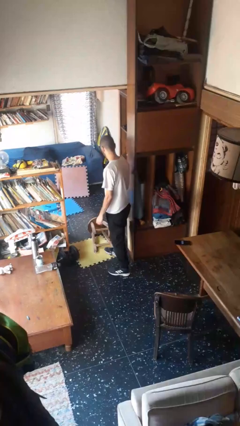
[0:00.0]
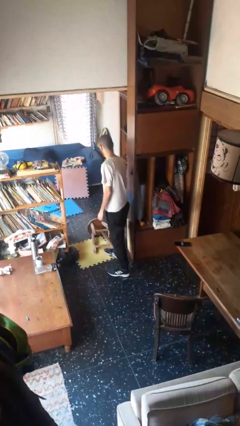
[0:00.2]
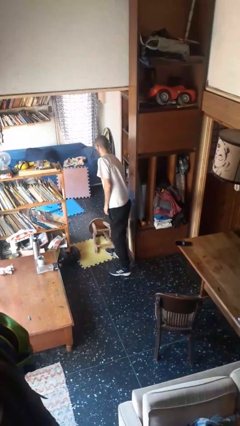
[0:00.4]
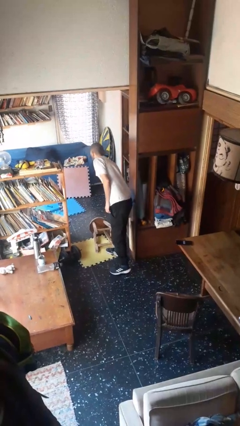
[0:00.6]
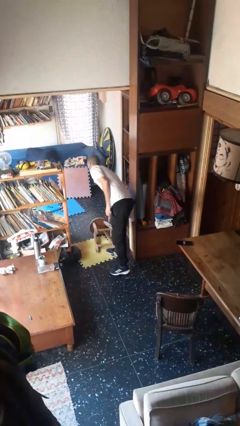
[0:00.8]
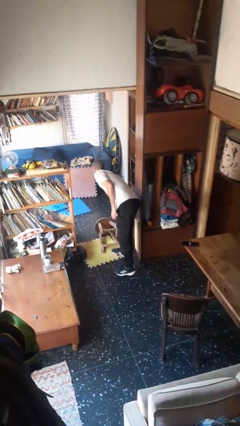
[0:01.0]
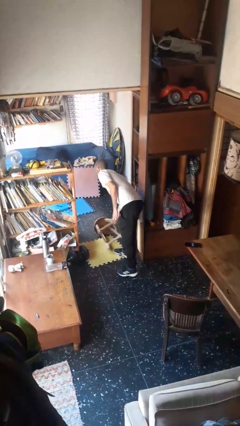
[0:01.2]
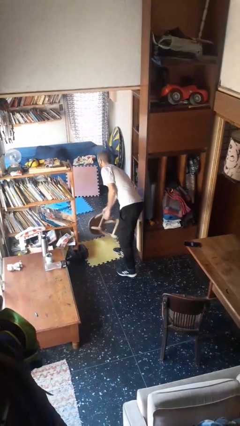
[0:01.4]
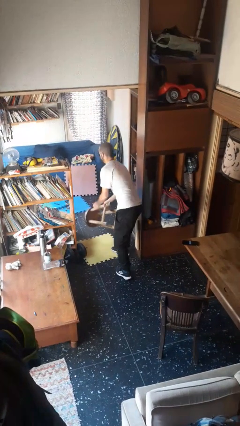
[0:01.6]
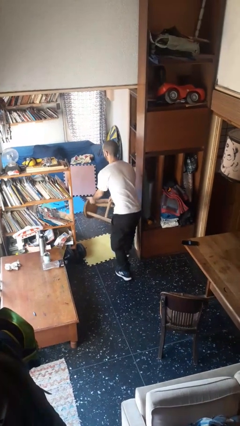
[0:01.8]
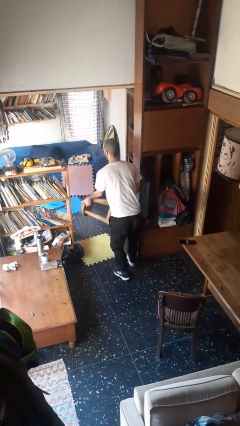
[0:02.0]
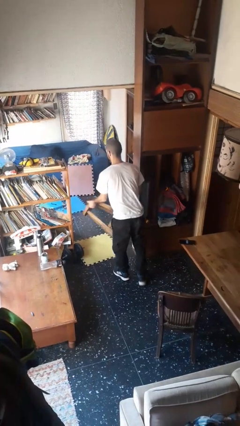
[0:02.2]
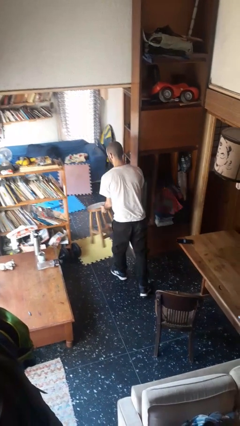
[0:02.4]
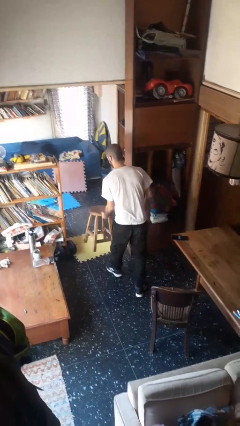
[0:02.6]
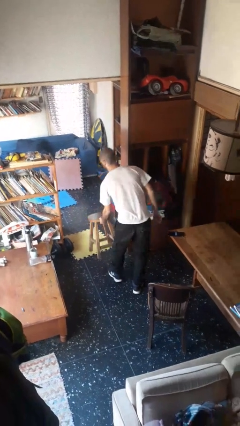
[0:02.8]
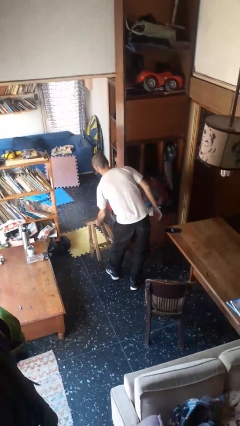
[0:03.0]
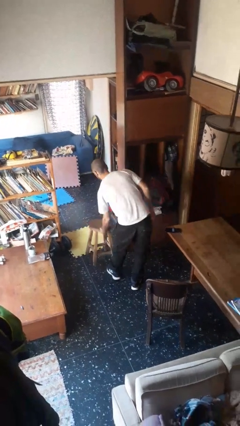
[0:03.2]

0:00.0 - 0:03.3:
person sets upright furniture

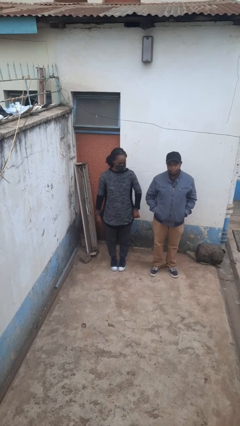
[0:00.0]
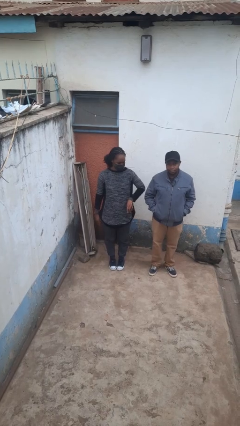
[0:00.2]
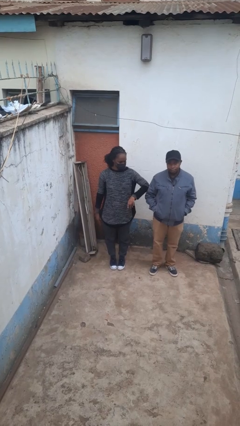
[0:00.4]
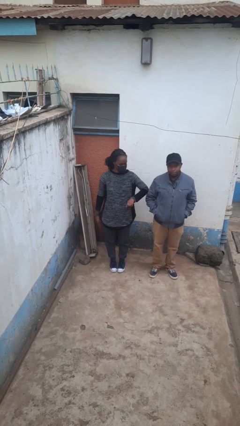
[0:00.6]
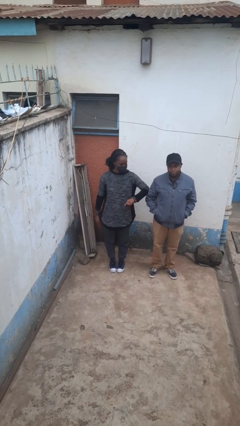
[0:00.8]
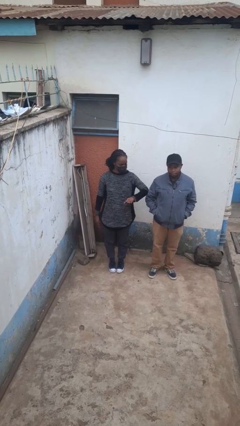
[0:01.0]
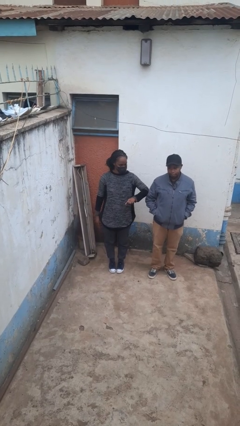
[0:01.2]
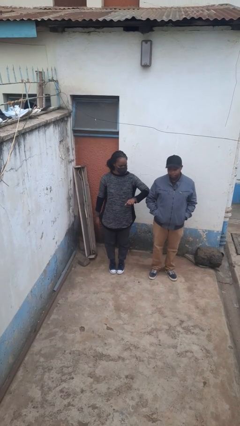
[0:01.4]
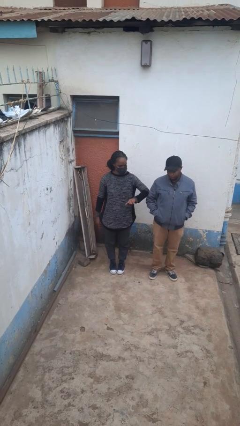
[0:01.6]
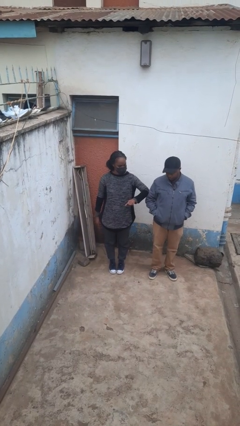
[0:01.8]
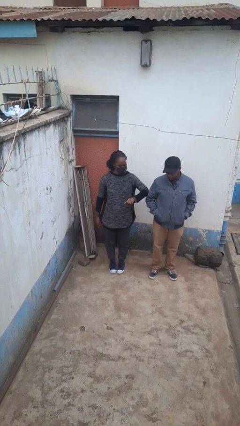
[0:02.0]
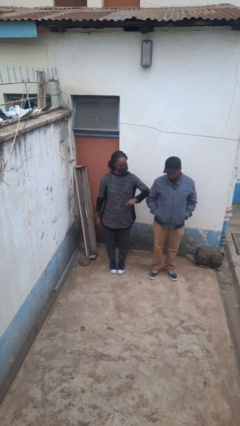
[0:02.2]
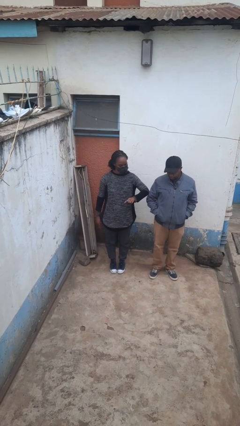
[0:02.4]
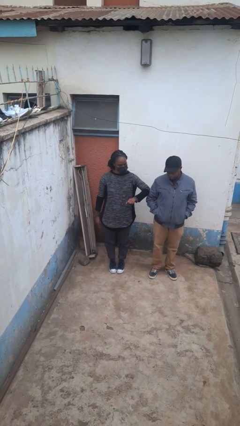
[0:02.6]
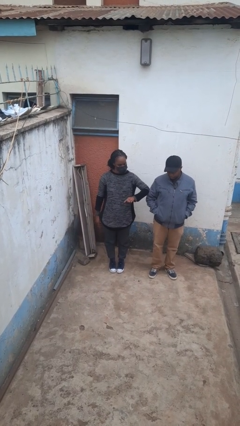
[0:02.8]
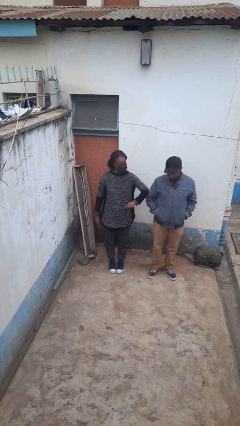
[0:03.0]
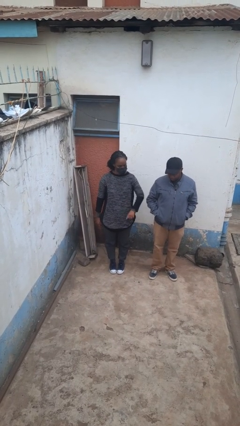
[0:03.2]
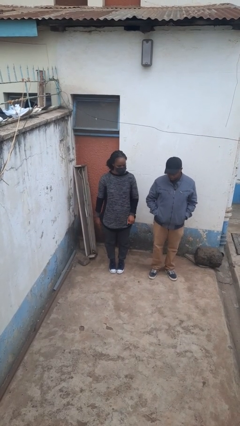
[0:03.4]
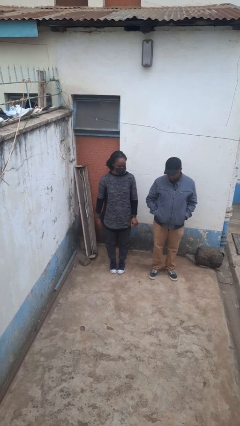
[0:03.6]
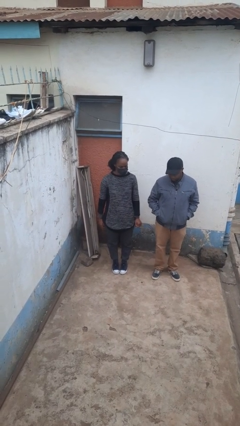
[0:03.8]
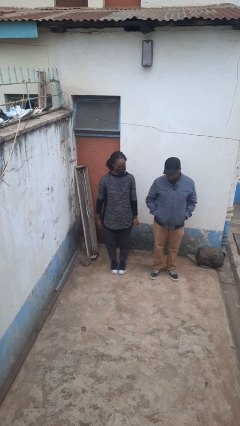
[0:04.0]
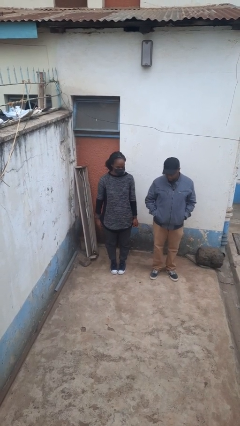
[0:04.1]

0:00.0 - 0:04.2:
person nudges person with elbow

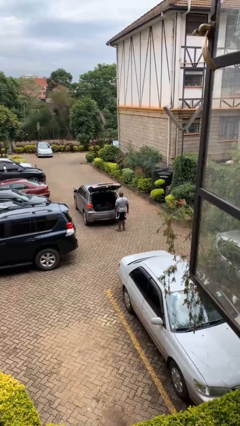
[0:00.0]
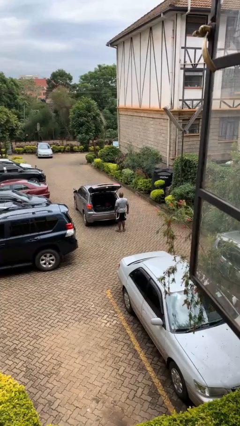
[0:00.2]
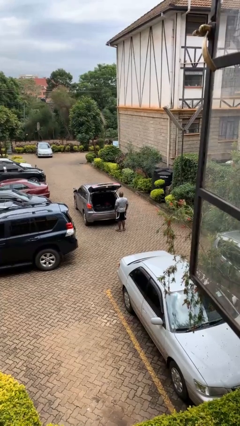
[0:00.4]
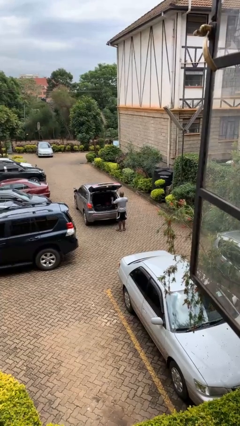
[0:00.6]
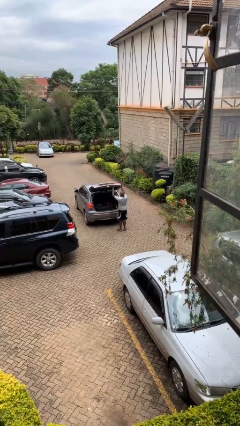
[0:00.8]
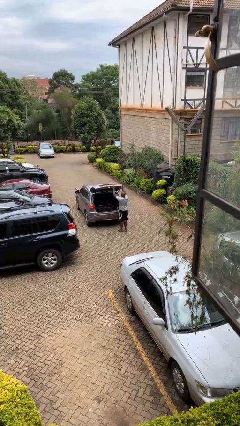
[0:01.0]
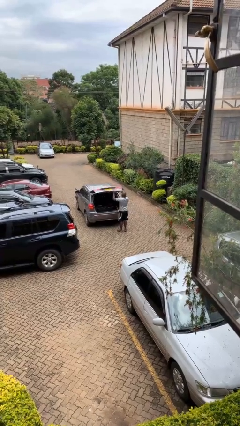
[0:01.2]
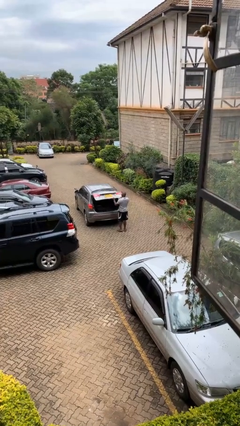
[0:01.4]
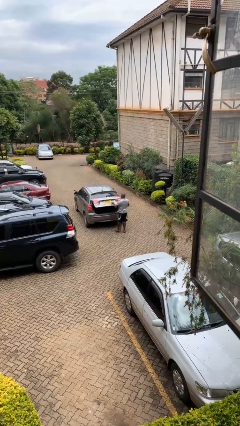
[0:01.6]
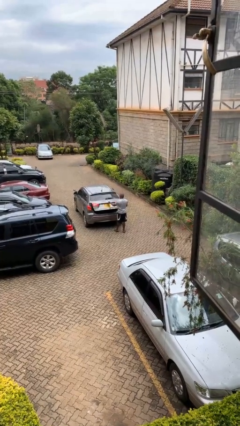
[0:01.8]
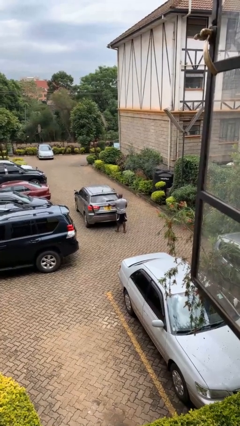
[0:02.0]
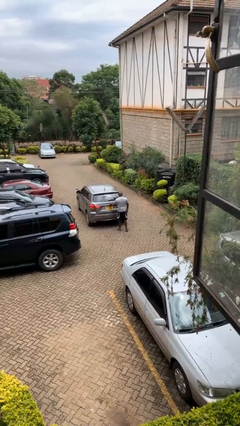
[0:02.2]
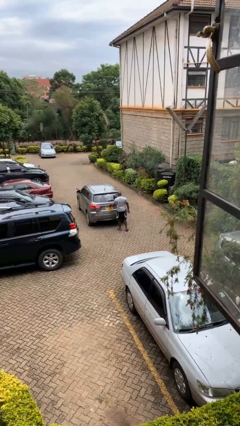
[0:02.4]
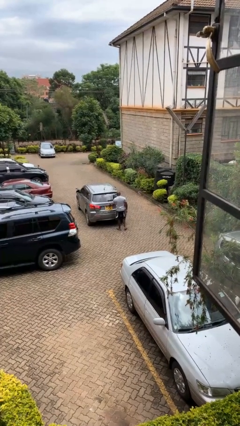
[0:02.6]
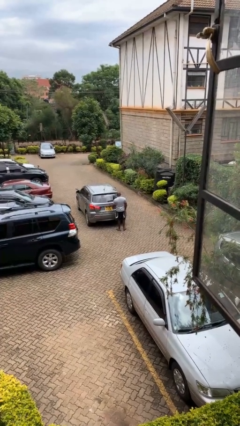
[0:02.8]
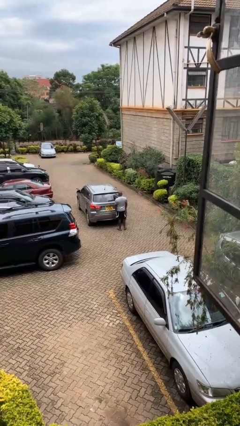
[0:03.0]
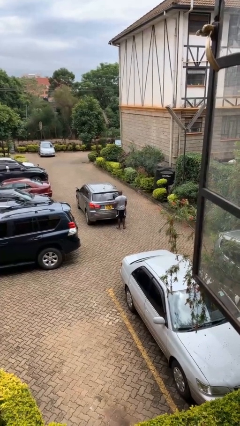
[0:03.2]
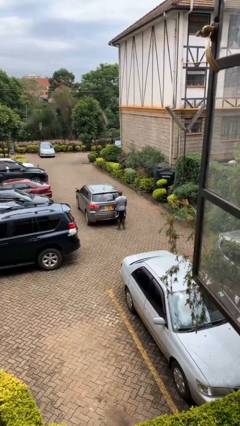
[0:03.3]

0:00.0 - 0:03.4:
person closes car trunk

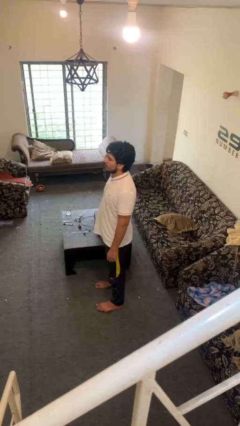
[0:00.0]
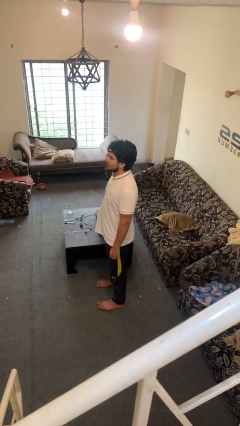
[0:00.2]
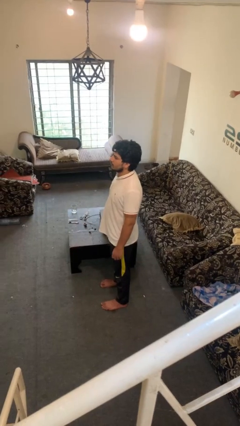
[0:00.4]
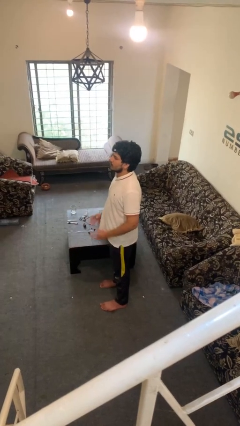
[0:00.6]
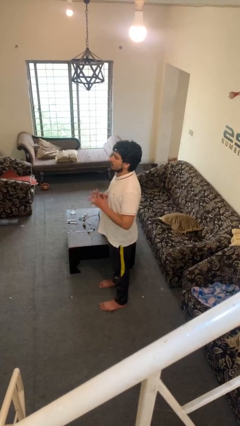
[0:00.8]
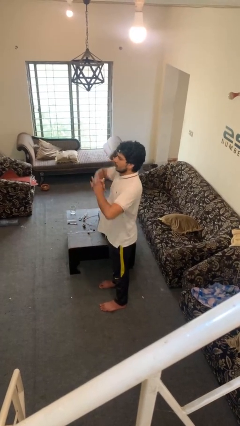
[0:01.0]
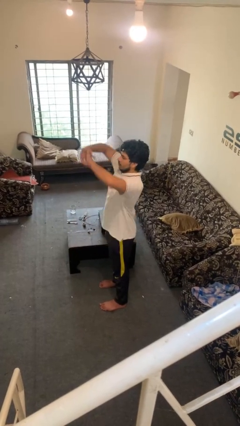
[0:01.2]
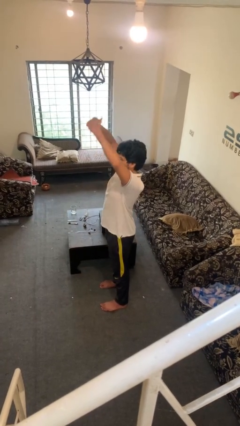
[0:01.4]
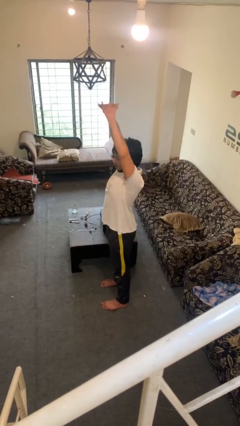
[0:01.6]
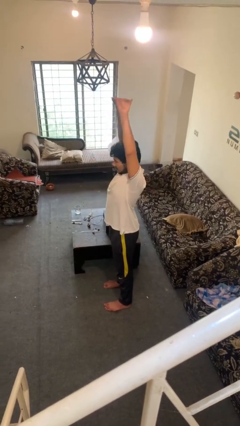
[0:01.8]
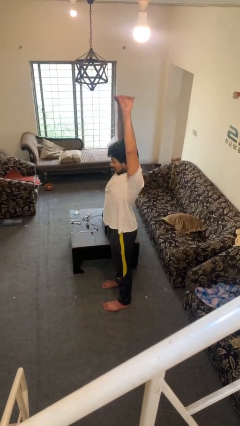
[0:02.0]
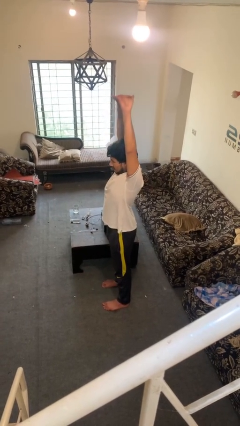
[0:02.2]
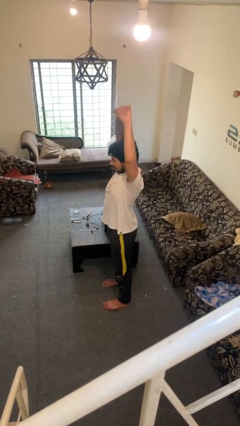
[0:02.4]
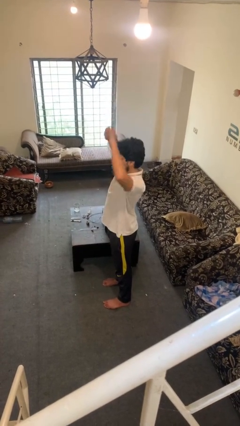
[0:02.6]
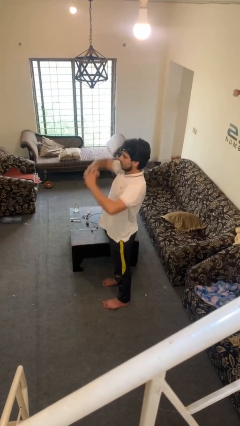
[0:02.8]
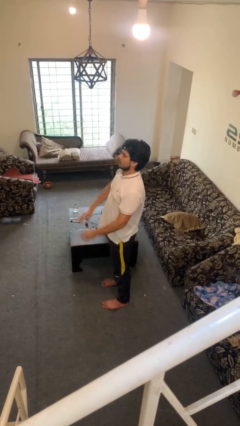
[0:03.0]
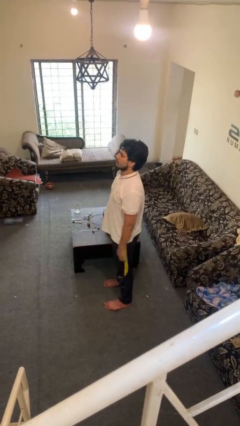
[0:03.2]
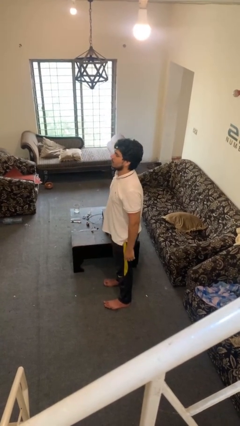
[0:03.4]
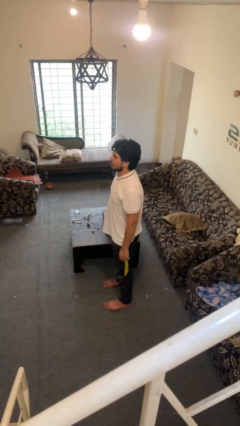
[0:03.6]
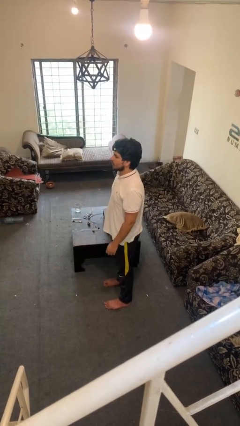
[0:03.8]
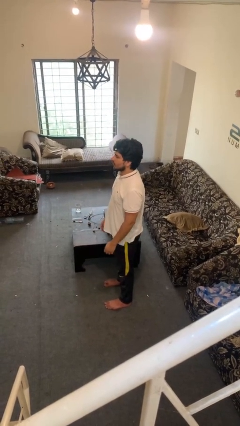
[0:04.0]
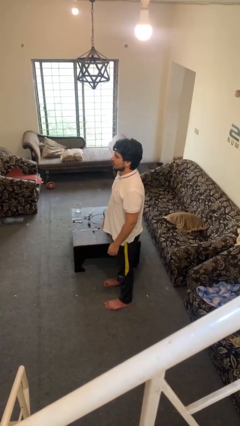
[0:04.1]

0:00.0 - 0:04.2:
person stretches arms over head

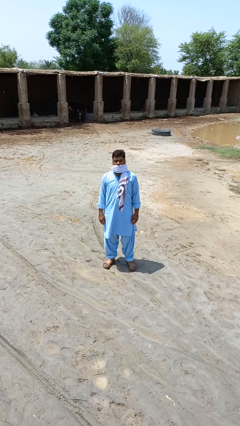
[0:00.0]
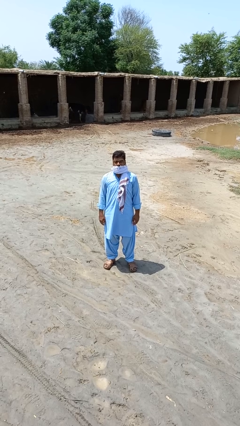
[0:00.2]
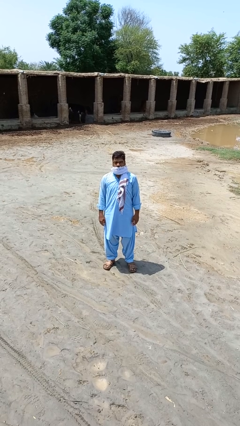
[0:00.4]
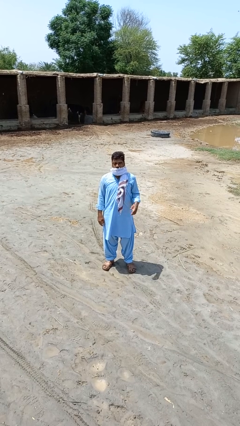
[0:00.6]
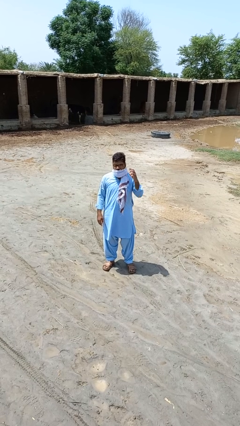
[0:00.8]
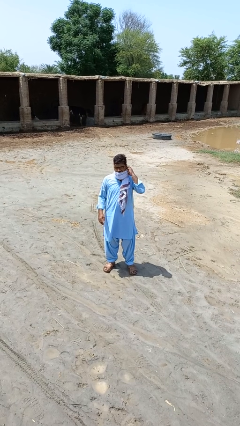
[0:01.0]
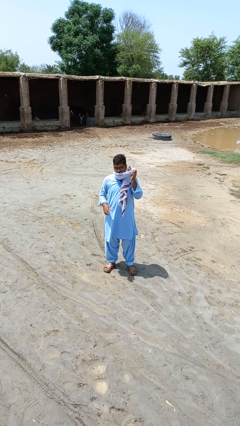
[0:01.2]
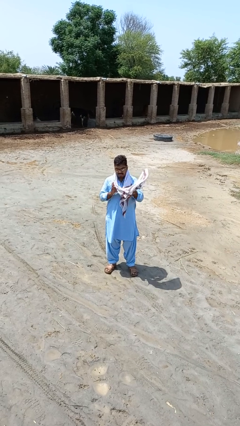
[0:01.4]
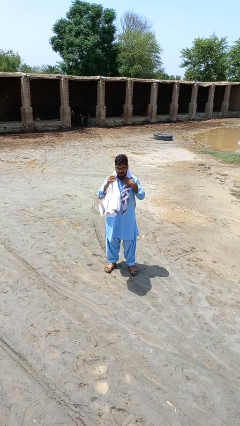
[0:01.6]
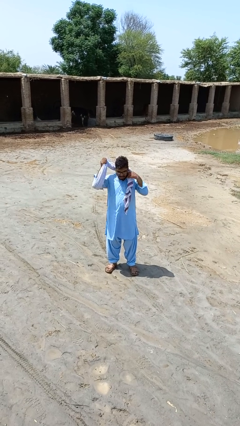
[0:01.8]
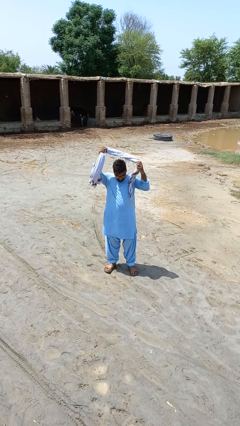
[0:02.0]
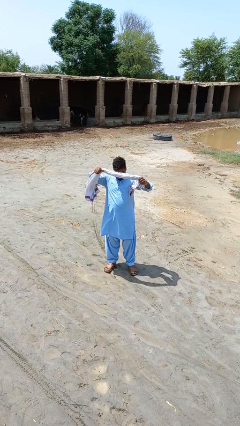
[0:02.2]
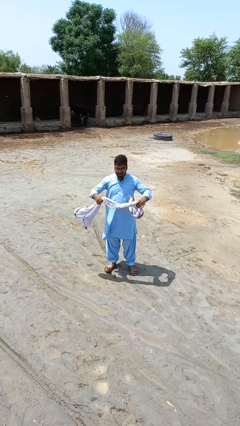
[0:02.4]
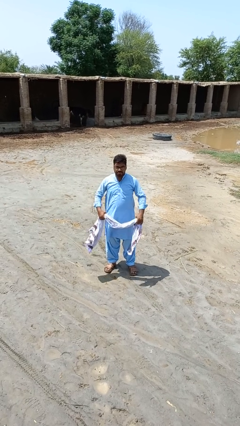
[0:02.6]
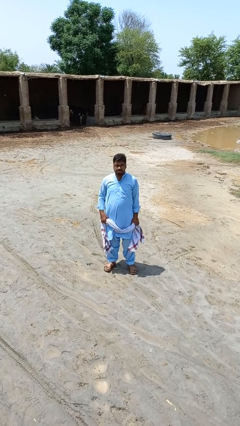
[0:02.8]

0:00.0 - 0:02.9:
person takes off scarf
